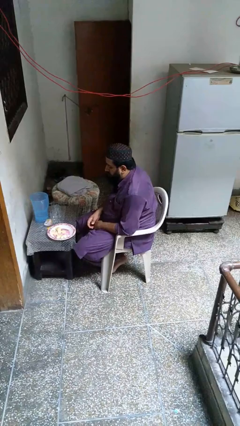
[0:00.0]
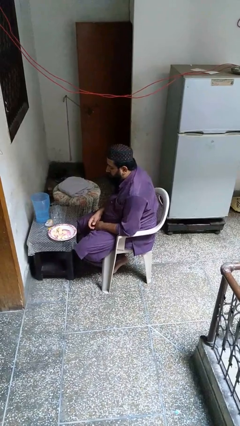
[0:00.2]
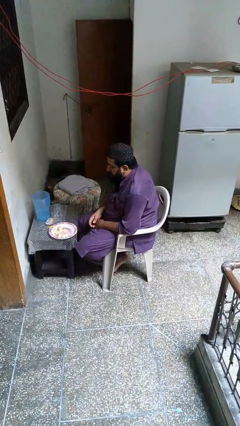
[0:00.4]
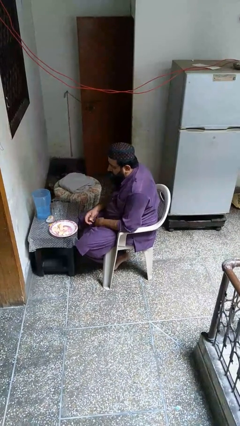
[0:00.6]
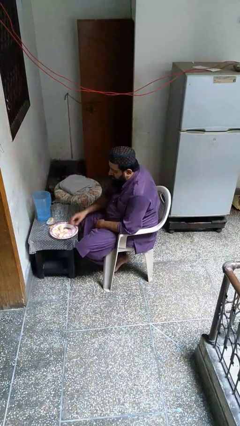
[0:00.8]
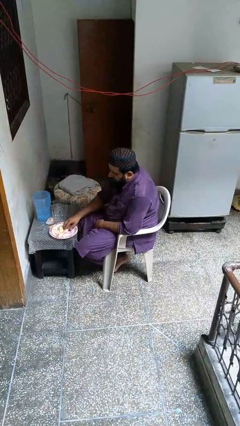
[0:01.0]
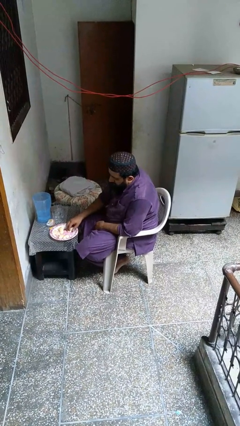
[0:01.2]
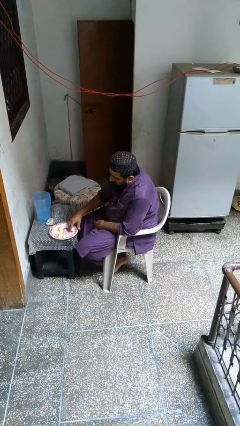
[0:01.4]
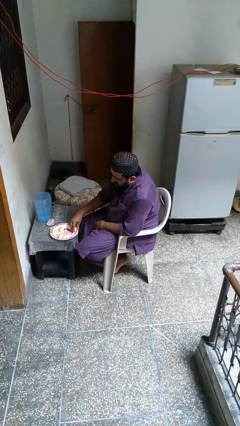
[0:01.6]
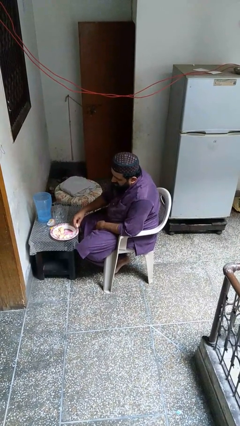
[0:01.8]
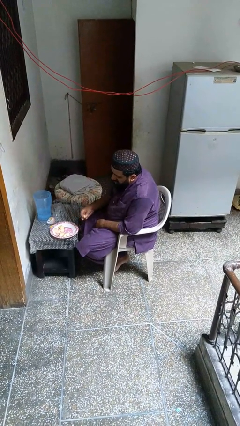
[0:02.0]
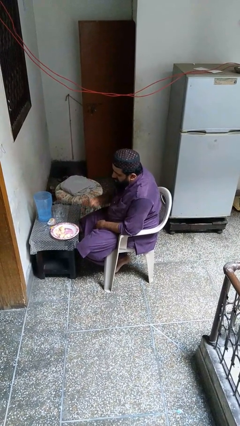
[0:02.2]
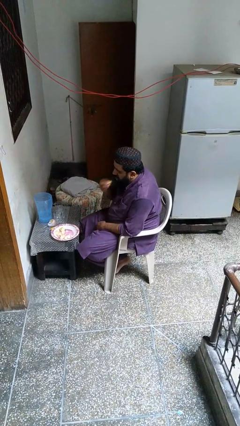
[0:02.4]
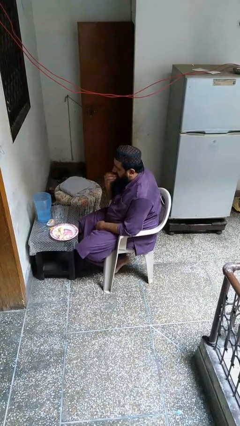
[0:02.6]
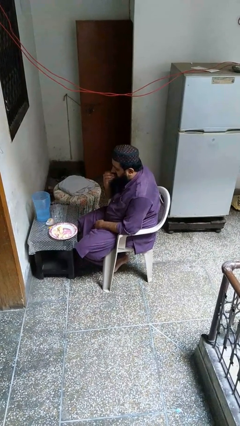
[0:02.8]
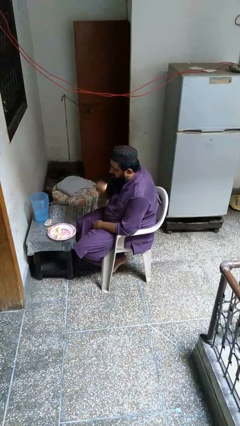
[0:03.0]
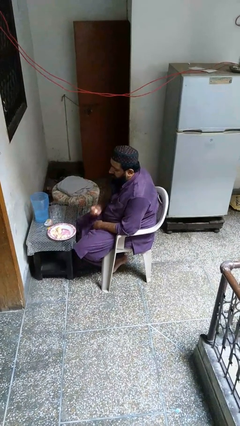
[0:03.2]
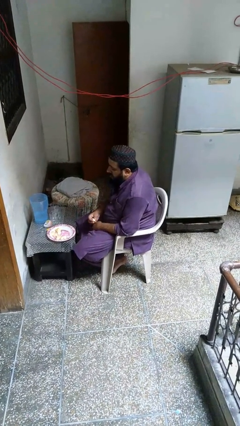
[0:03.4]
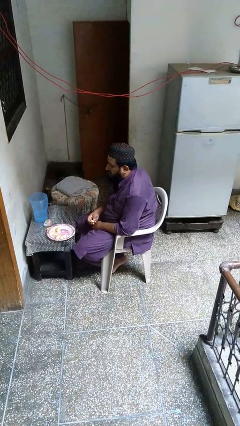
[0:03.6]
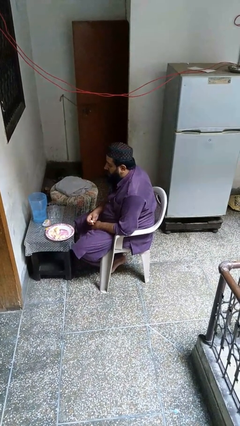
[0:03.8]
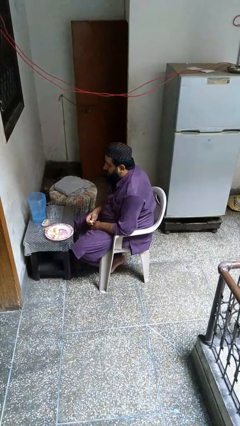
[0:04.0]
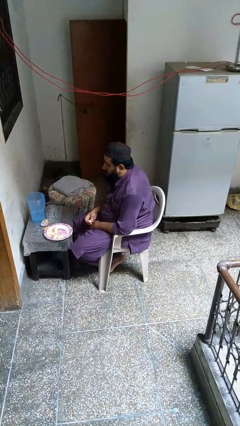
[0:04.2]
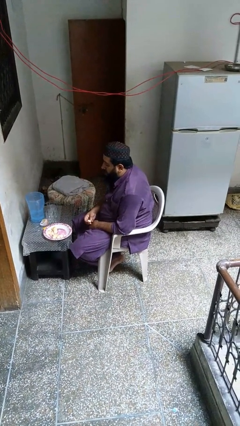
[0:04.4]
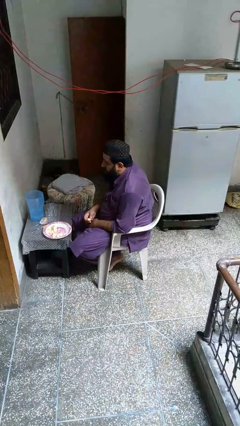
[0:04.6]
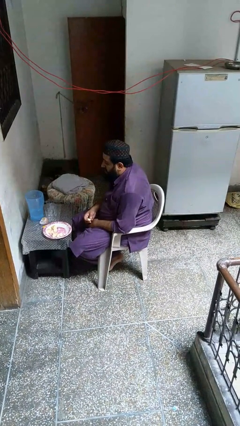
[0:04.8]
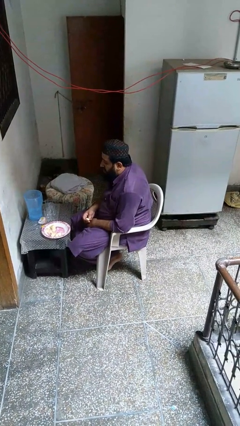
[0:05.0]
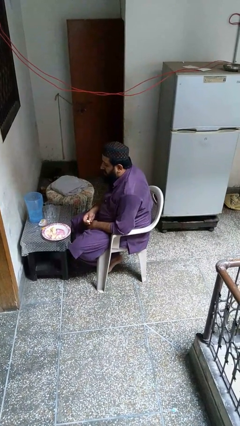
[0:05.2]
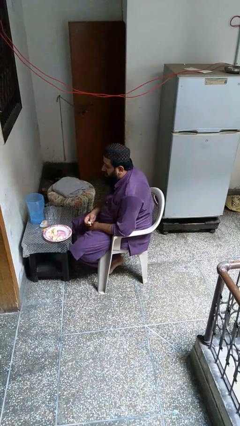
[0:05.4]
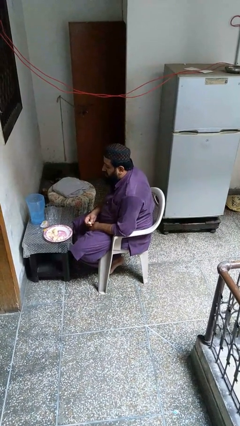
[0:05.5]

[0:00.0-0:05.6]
person eats with hands

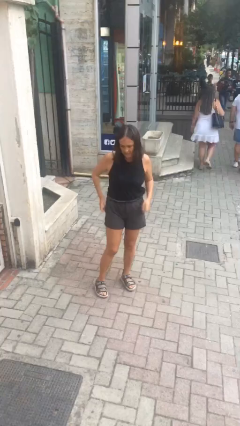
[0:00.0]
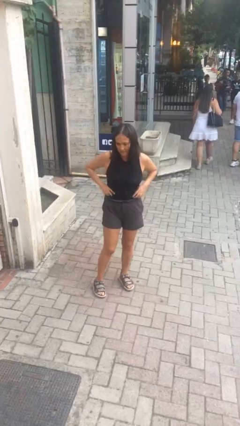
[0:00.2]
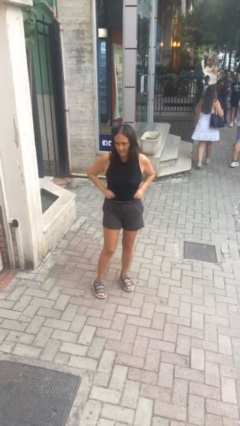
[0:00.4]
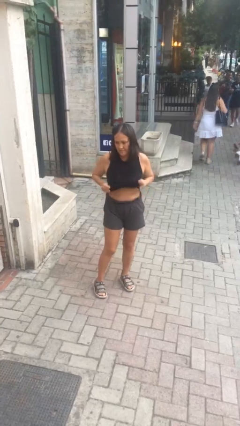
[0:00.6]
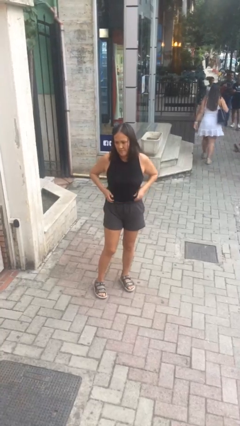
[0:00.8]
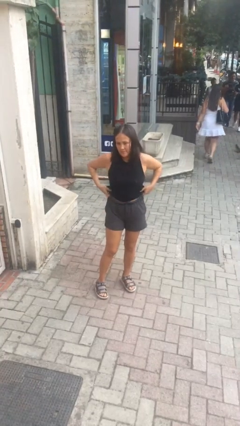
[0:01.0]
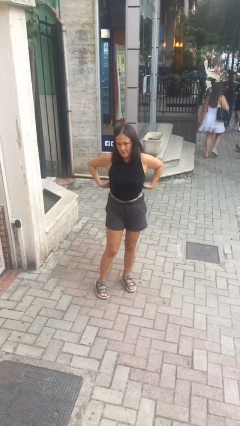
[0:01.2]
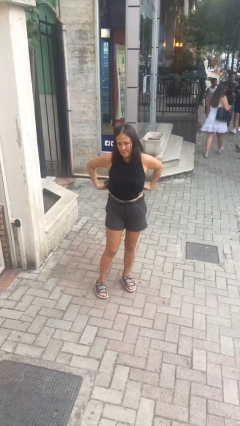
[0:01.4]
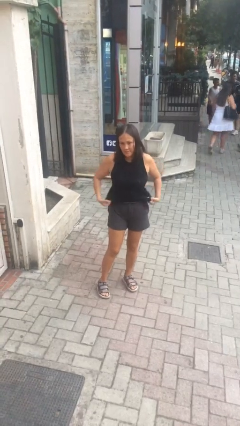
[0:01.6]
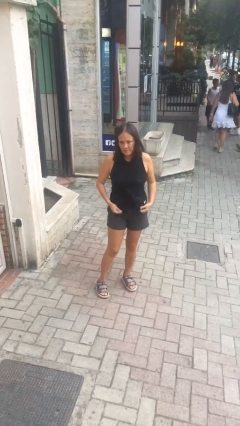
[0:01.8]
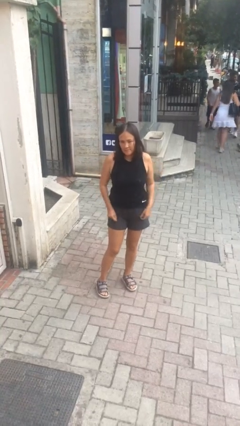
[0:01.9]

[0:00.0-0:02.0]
person untucks shirt

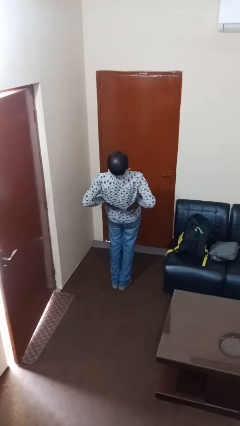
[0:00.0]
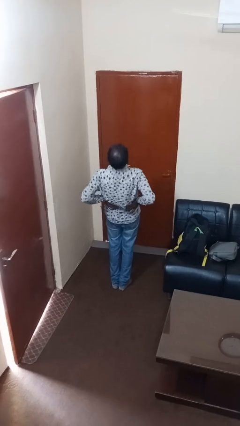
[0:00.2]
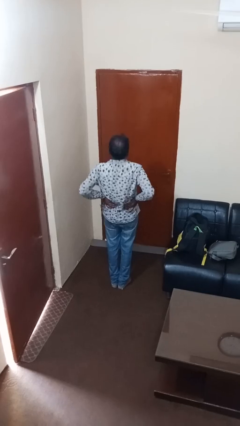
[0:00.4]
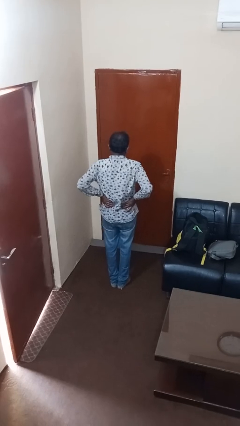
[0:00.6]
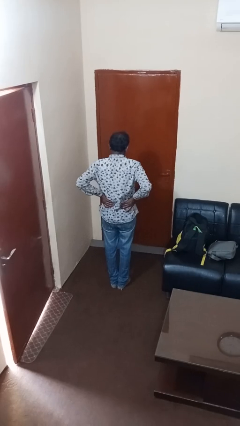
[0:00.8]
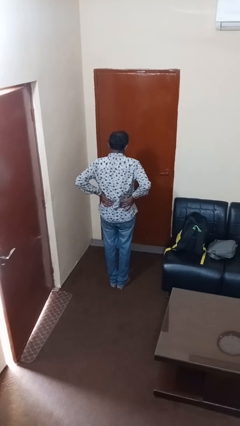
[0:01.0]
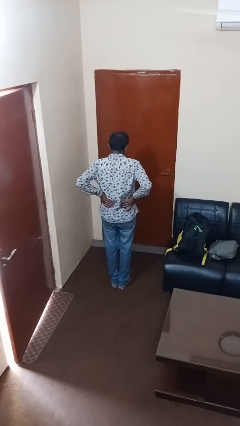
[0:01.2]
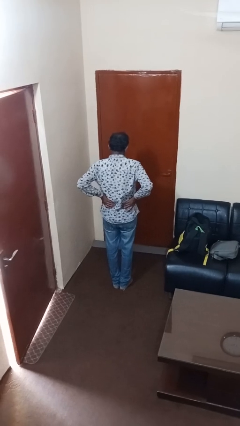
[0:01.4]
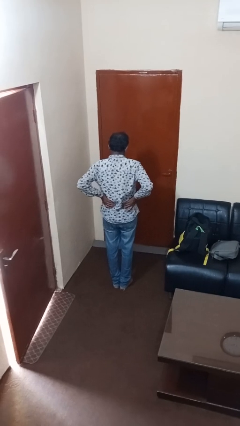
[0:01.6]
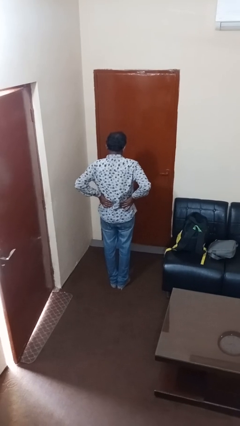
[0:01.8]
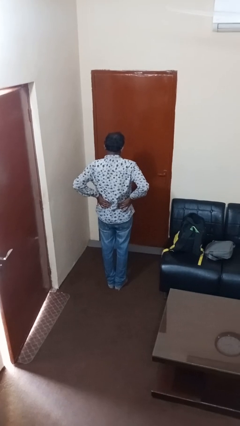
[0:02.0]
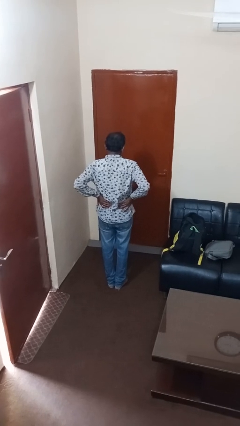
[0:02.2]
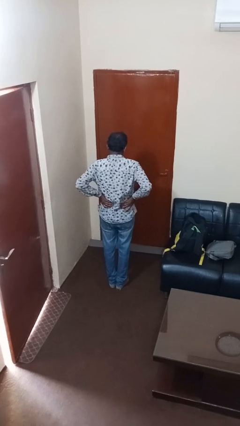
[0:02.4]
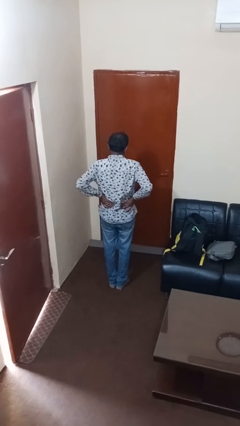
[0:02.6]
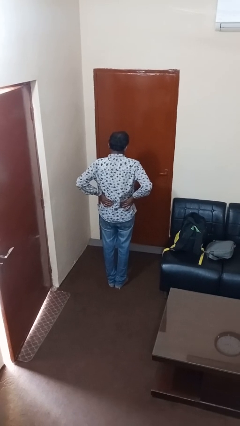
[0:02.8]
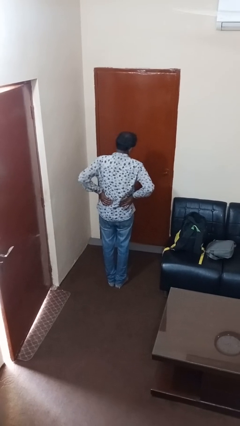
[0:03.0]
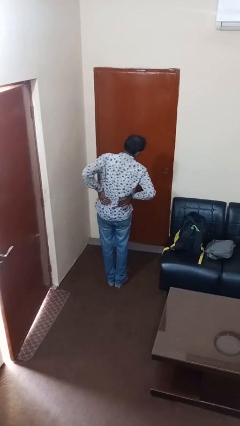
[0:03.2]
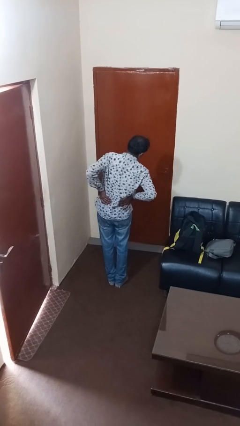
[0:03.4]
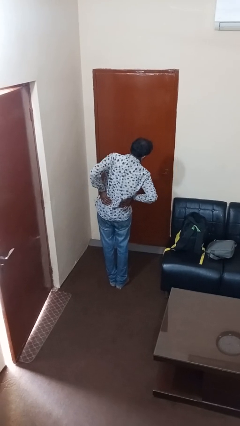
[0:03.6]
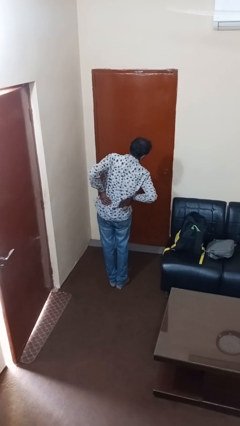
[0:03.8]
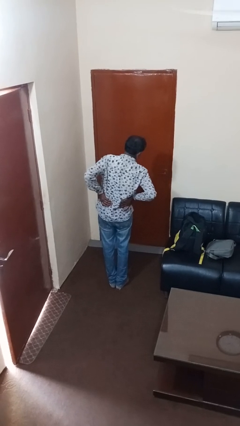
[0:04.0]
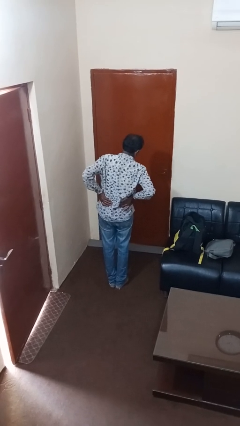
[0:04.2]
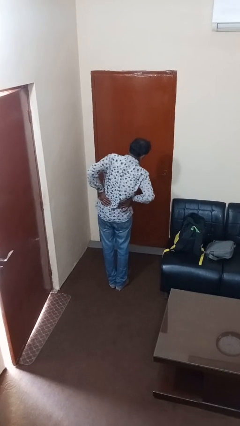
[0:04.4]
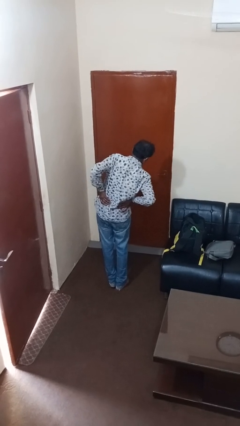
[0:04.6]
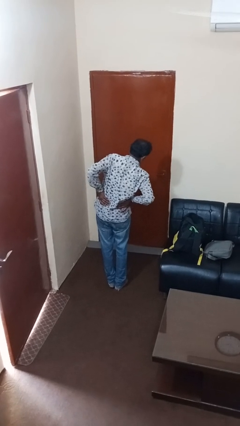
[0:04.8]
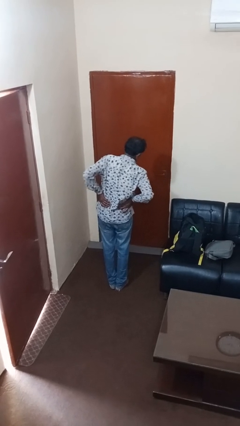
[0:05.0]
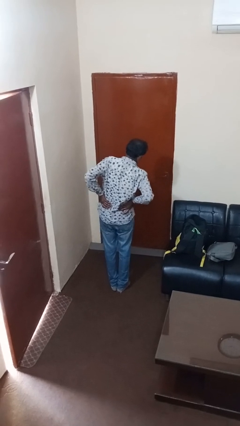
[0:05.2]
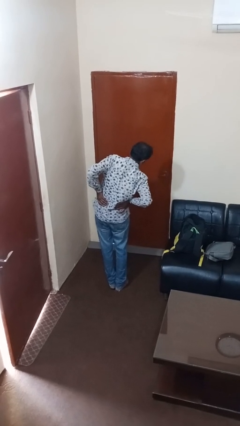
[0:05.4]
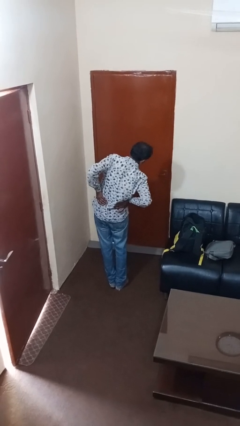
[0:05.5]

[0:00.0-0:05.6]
person stretches arms to side

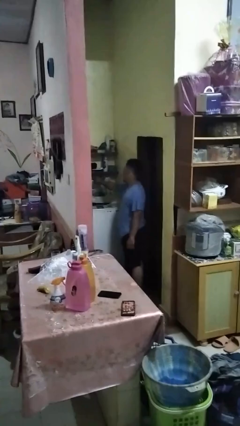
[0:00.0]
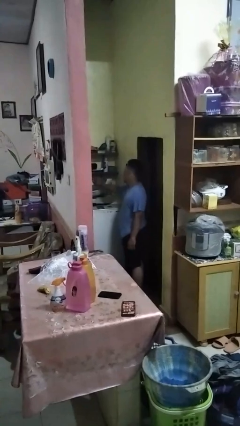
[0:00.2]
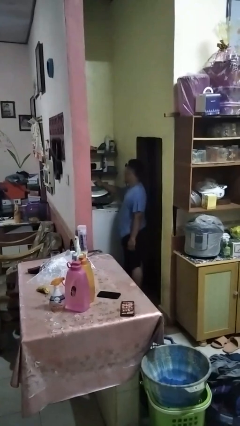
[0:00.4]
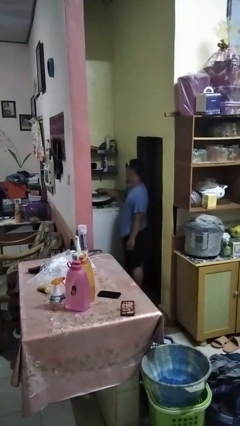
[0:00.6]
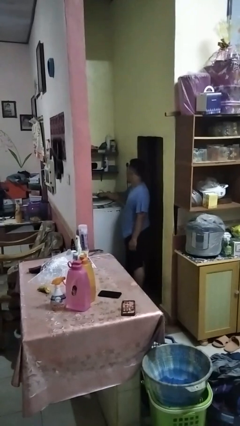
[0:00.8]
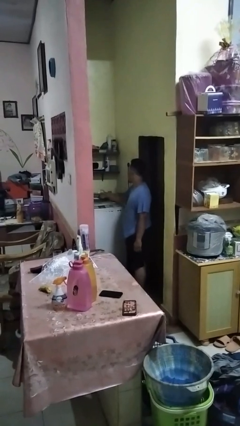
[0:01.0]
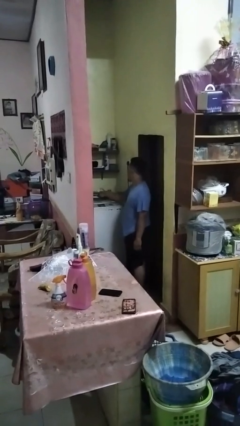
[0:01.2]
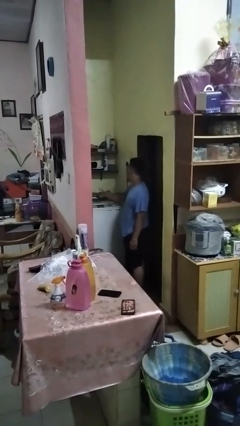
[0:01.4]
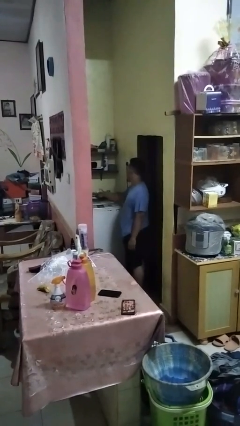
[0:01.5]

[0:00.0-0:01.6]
person closes clothes washer

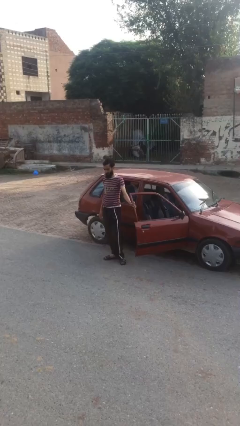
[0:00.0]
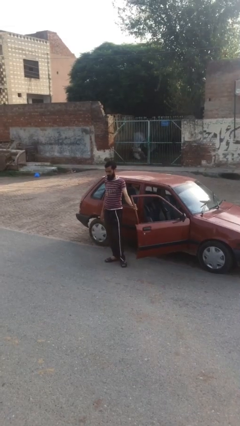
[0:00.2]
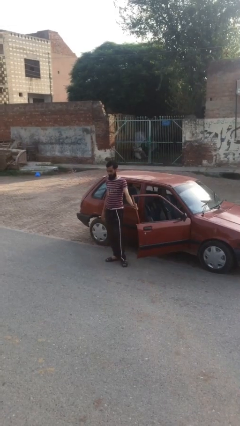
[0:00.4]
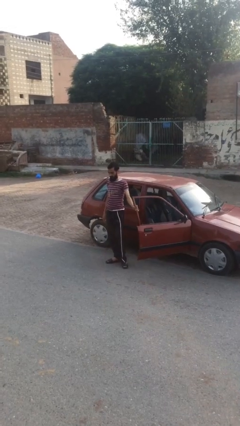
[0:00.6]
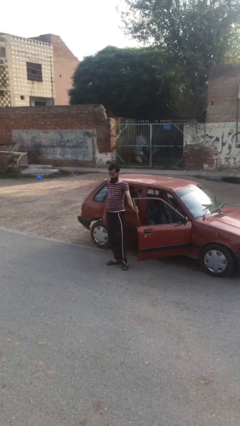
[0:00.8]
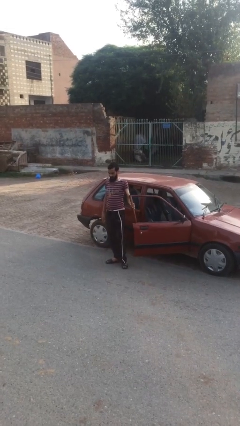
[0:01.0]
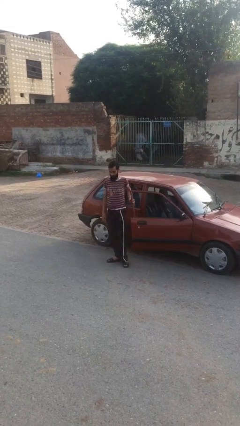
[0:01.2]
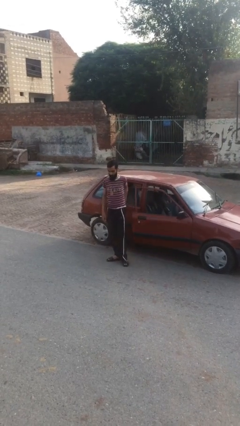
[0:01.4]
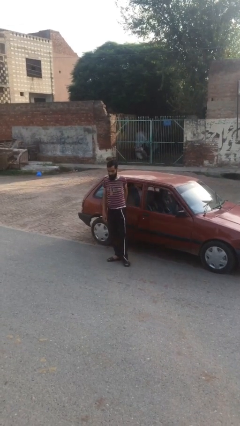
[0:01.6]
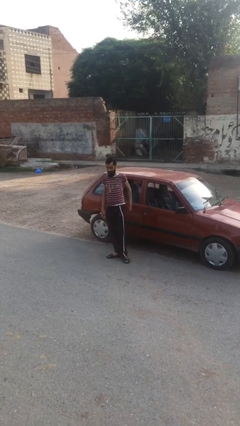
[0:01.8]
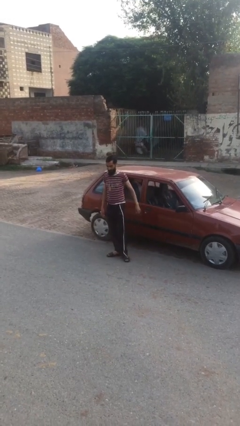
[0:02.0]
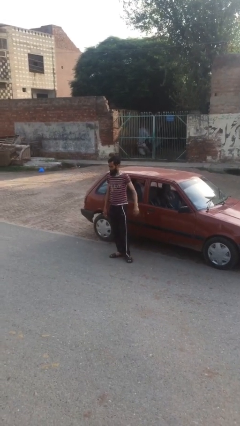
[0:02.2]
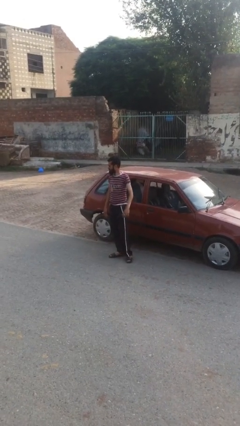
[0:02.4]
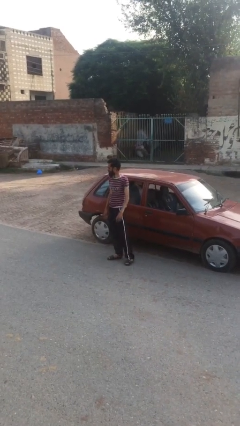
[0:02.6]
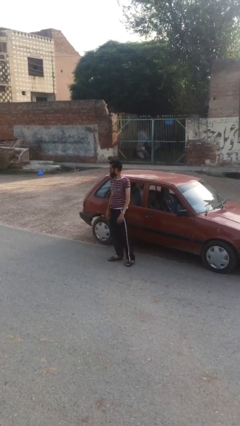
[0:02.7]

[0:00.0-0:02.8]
person closes car door
